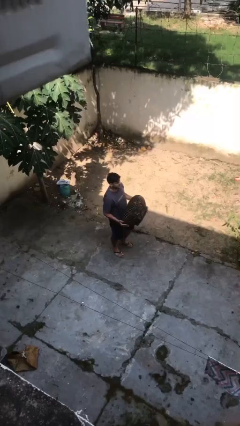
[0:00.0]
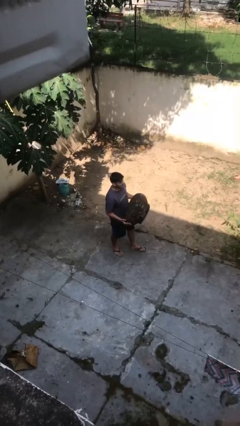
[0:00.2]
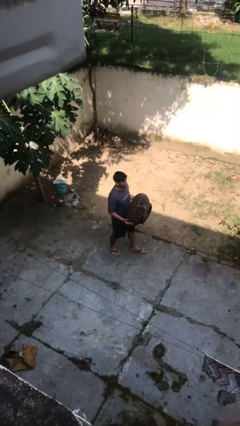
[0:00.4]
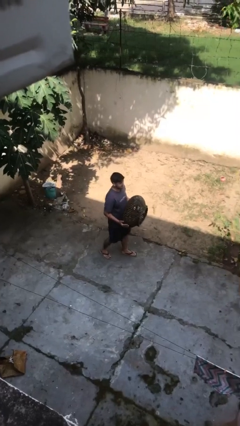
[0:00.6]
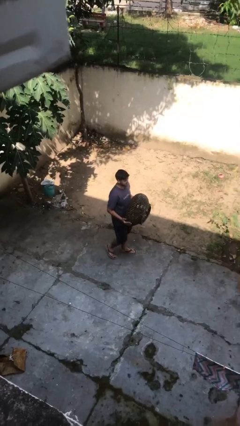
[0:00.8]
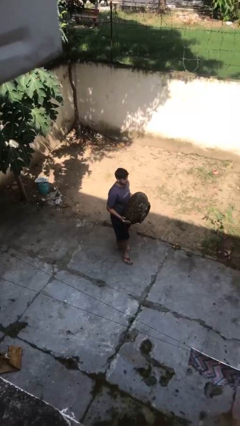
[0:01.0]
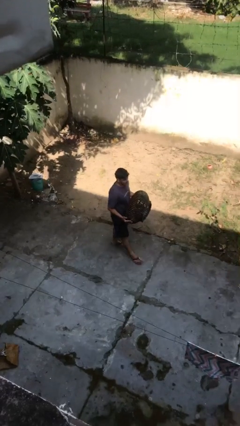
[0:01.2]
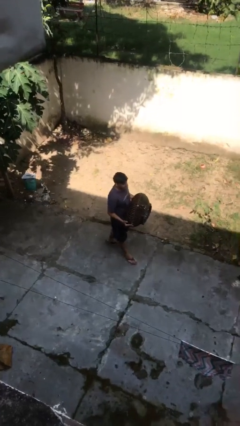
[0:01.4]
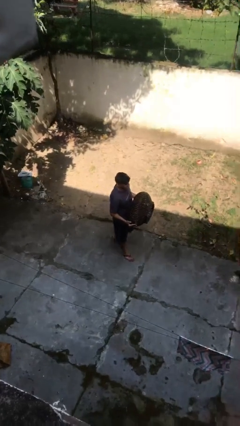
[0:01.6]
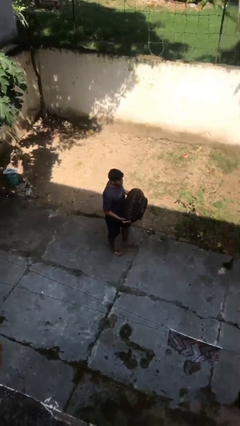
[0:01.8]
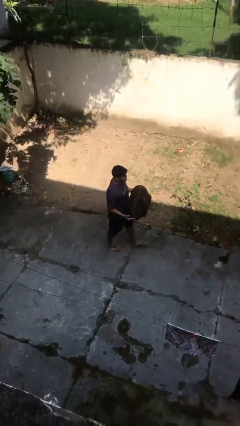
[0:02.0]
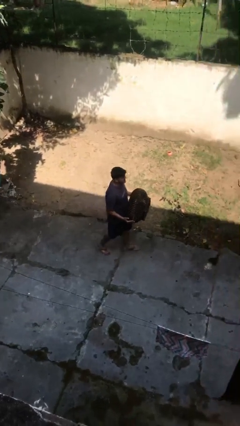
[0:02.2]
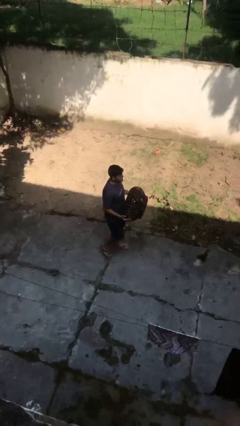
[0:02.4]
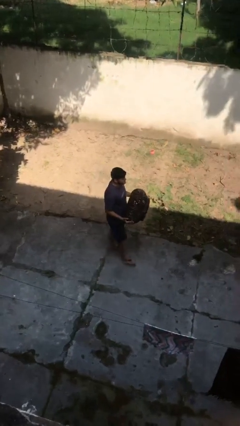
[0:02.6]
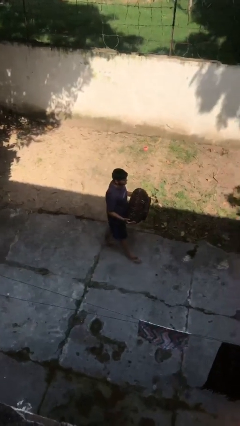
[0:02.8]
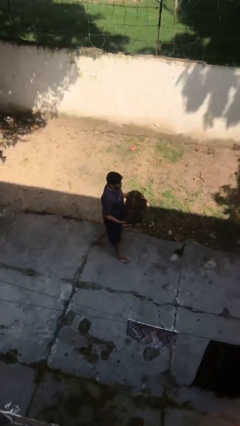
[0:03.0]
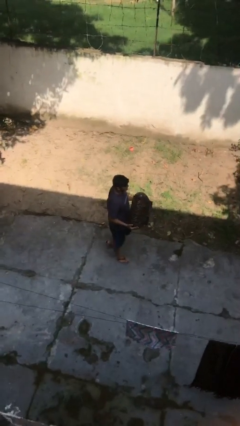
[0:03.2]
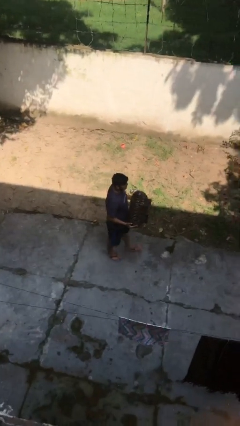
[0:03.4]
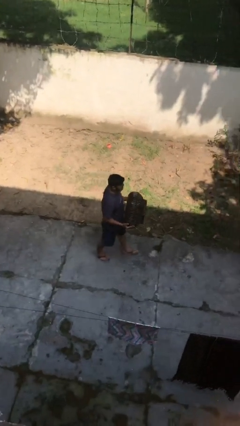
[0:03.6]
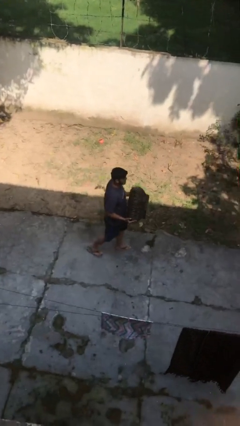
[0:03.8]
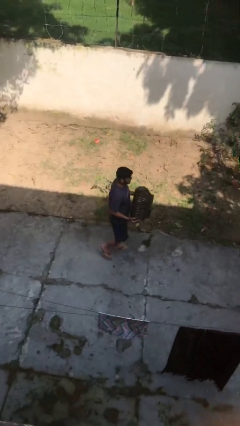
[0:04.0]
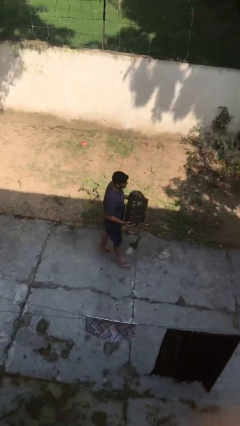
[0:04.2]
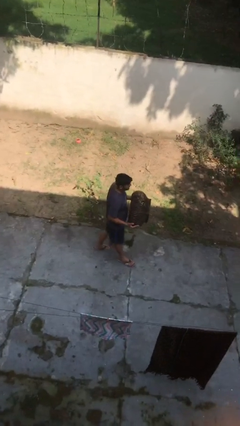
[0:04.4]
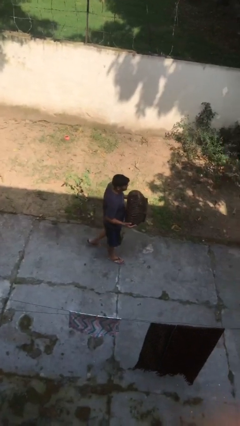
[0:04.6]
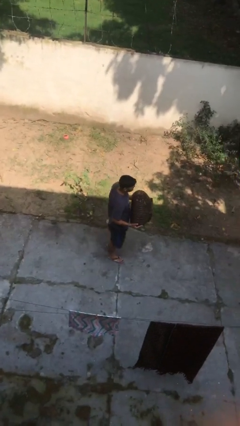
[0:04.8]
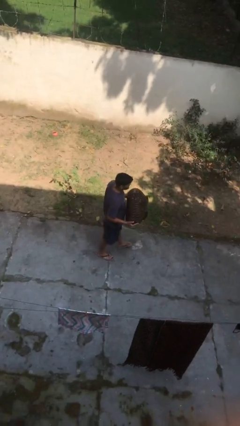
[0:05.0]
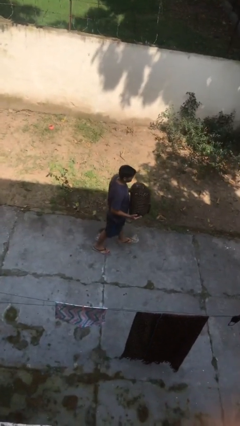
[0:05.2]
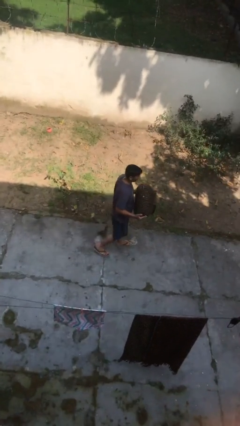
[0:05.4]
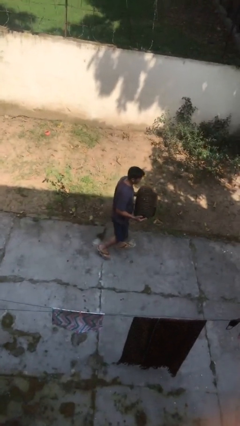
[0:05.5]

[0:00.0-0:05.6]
person carries heavy object

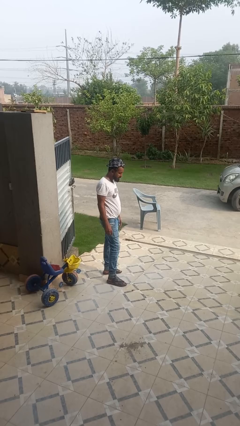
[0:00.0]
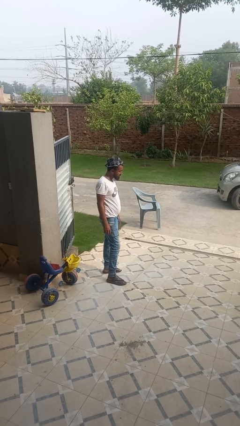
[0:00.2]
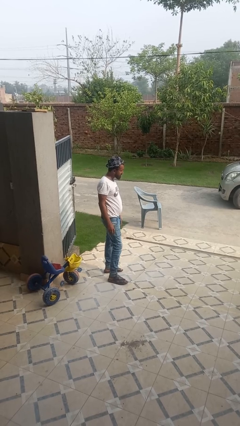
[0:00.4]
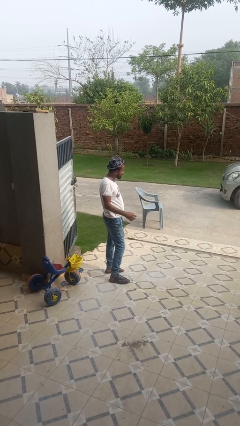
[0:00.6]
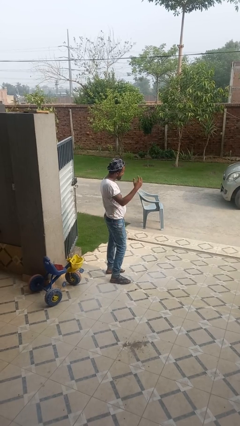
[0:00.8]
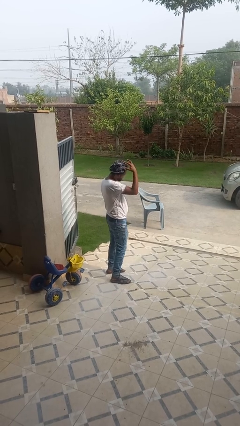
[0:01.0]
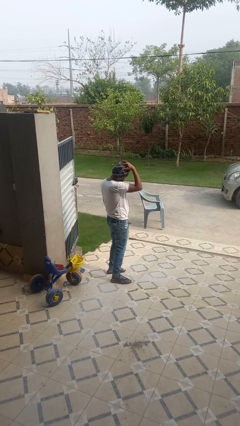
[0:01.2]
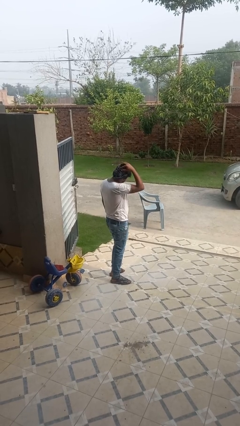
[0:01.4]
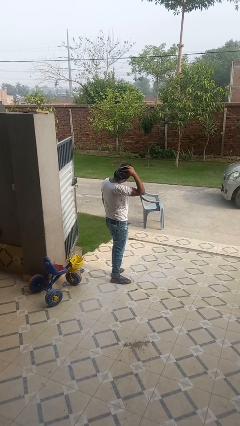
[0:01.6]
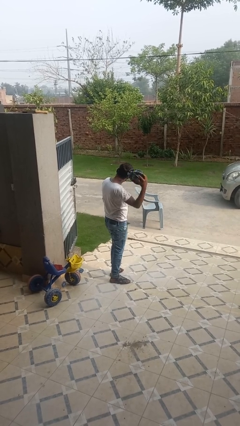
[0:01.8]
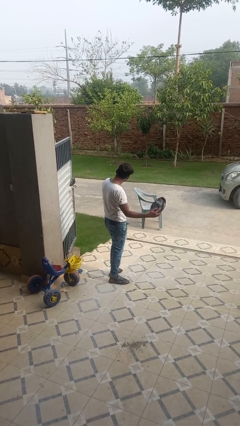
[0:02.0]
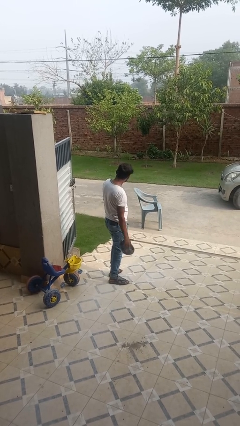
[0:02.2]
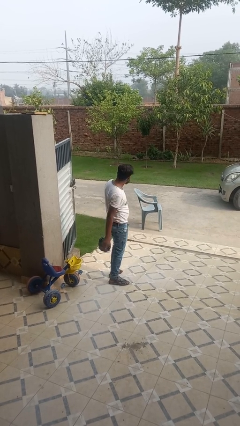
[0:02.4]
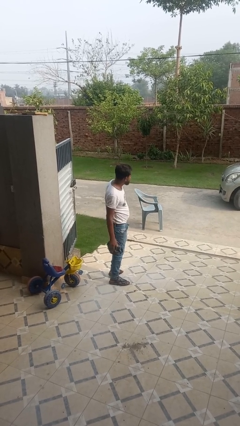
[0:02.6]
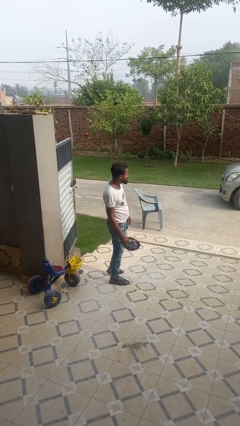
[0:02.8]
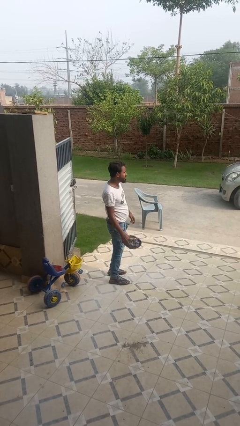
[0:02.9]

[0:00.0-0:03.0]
person takes off hat

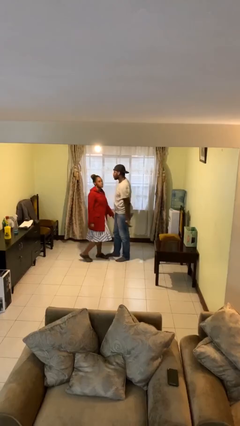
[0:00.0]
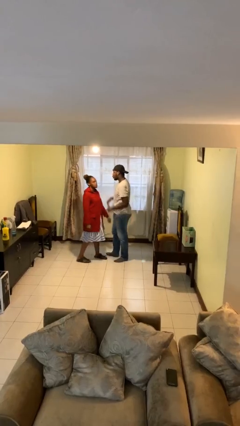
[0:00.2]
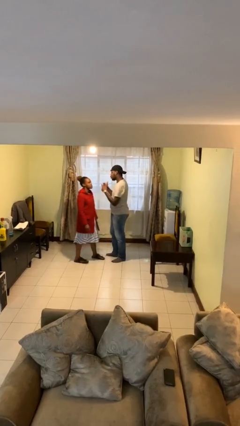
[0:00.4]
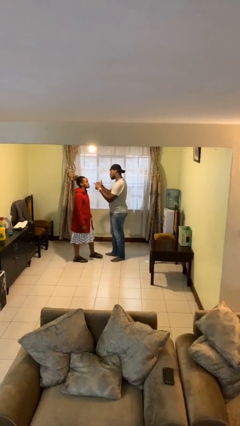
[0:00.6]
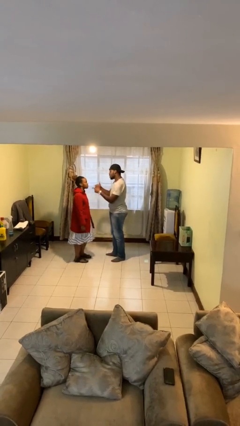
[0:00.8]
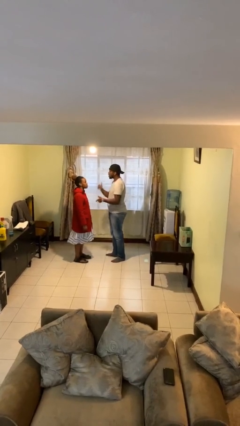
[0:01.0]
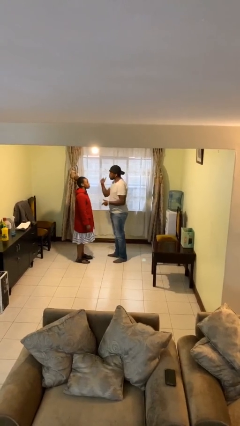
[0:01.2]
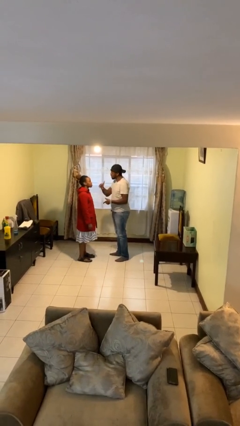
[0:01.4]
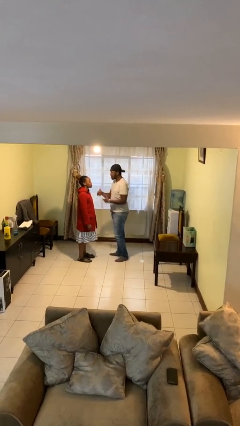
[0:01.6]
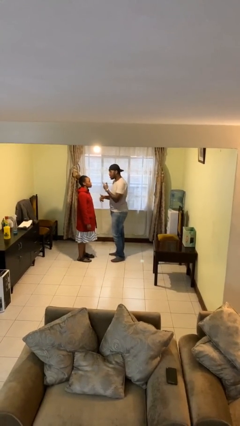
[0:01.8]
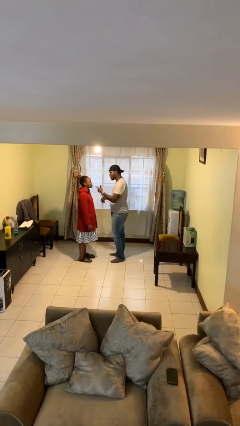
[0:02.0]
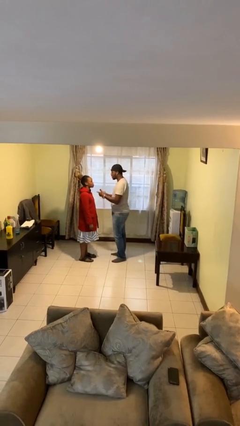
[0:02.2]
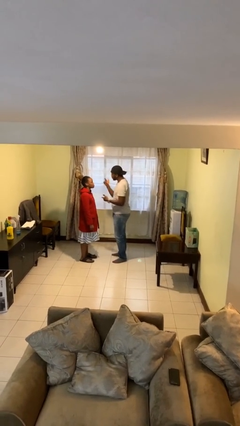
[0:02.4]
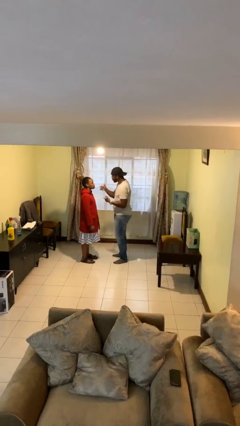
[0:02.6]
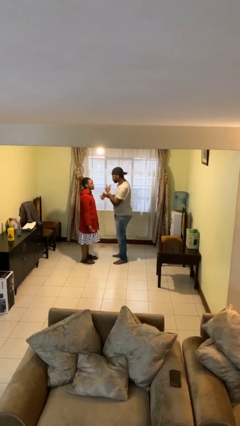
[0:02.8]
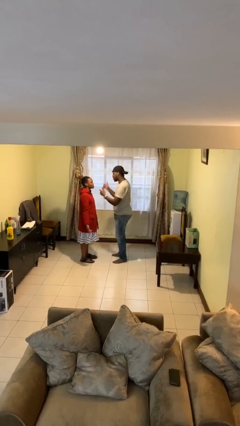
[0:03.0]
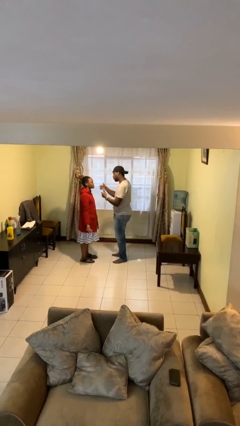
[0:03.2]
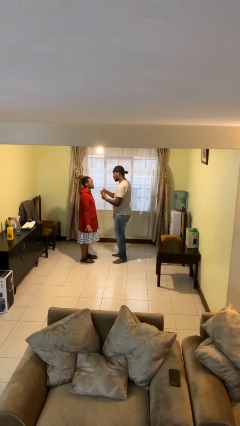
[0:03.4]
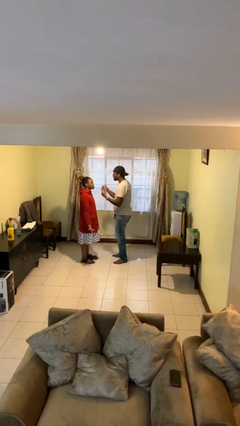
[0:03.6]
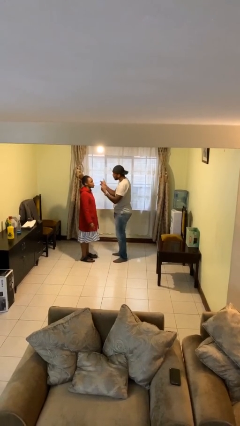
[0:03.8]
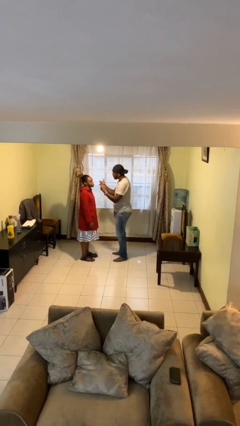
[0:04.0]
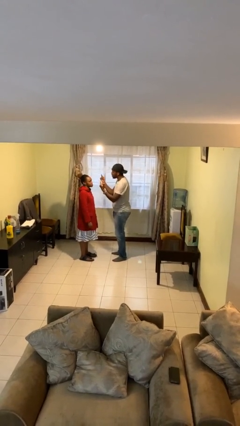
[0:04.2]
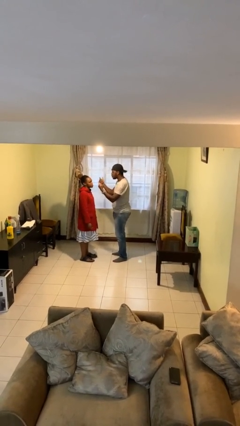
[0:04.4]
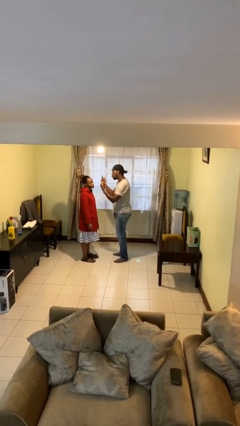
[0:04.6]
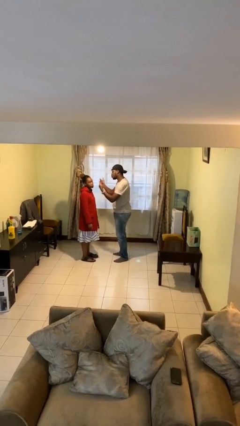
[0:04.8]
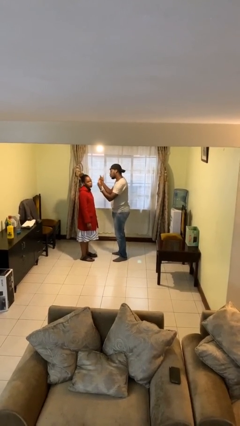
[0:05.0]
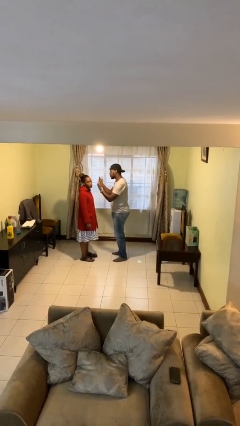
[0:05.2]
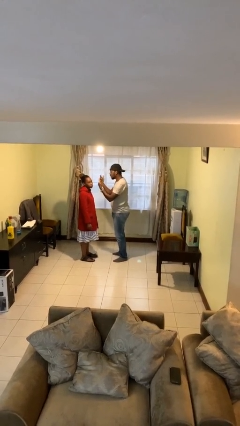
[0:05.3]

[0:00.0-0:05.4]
person talks to person

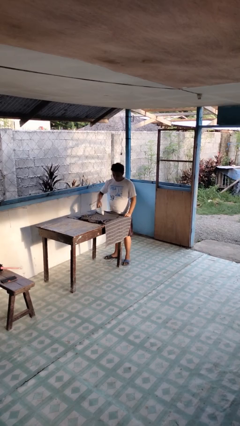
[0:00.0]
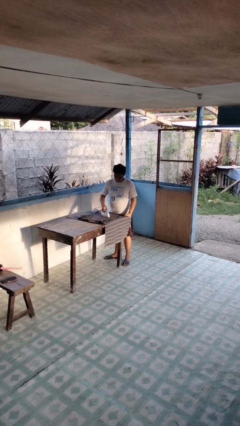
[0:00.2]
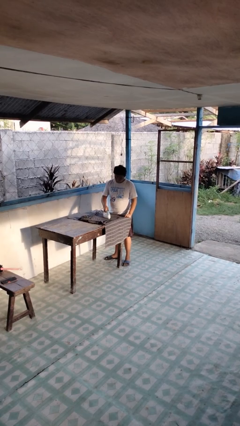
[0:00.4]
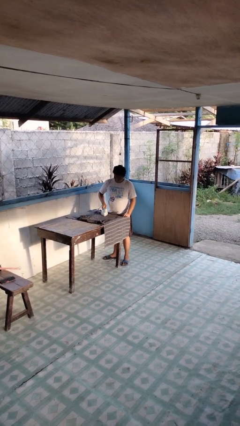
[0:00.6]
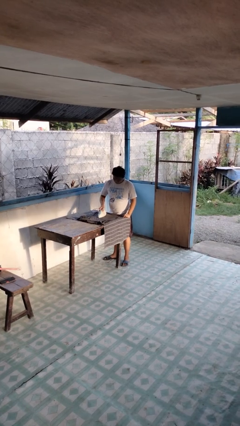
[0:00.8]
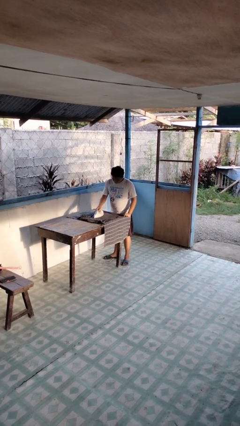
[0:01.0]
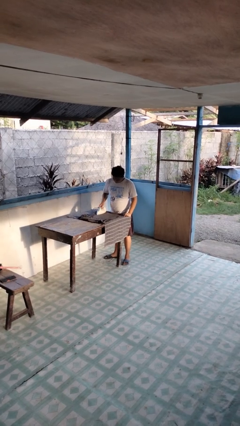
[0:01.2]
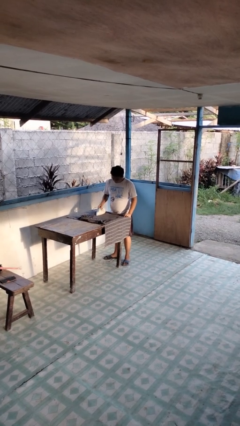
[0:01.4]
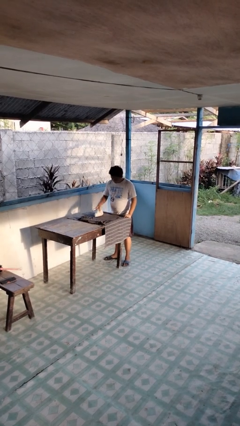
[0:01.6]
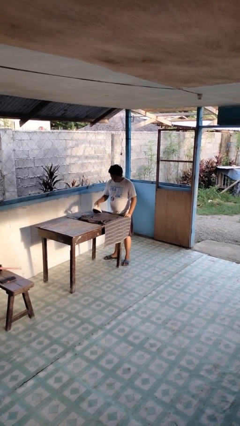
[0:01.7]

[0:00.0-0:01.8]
person irons clothes

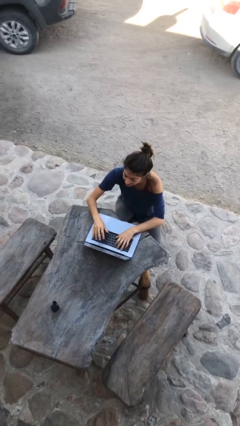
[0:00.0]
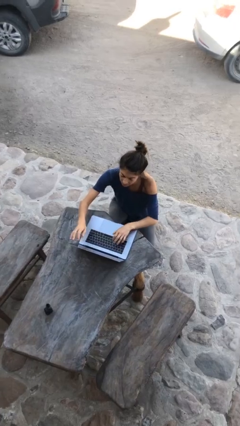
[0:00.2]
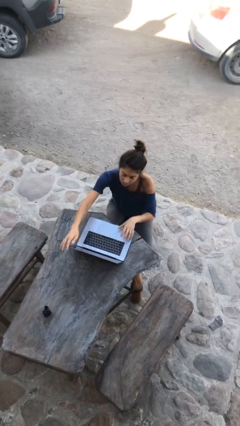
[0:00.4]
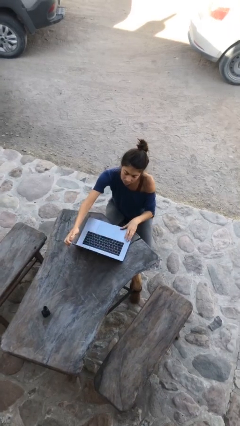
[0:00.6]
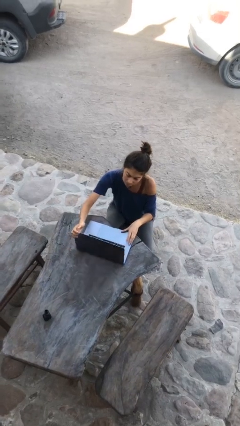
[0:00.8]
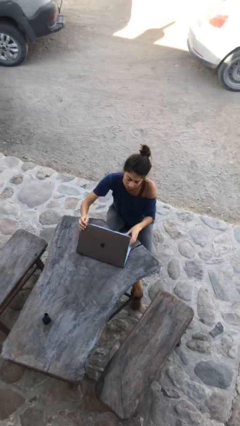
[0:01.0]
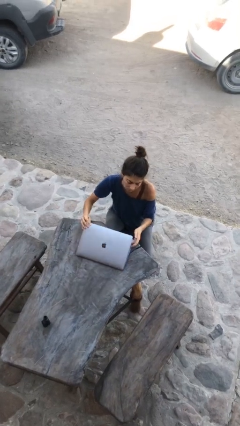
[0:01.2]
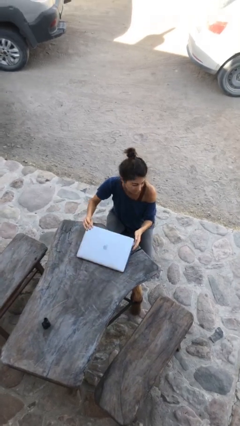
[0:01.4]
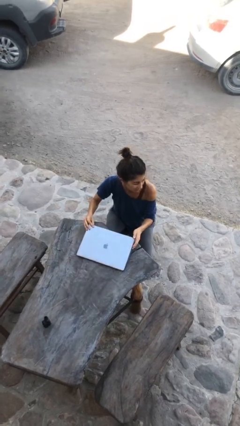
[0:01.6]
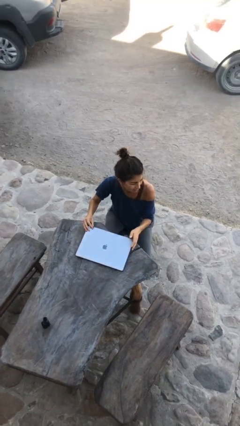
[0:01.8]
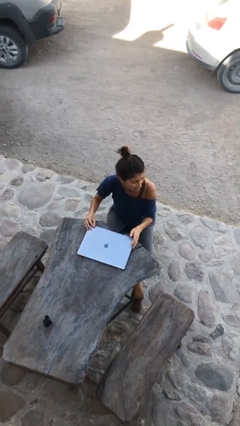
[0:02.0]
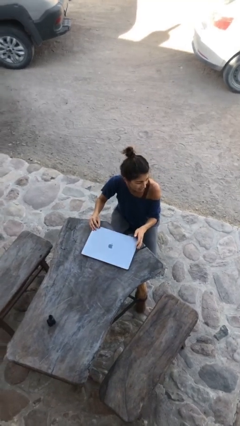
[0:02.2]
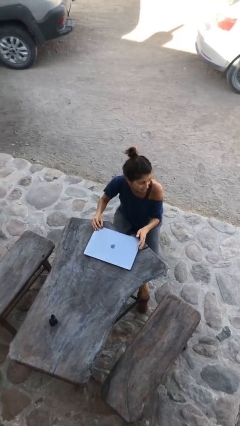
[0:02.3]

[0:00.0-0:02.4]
person interacts with laptop
